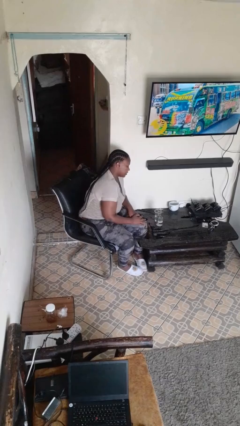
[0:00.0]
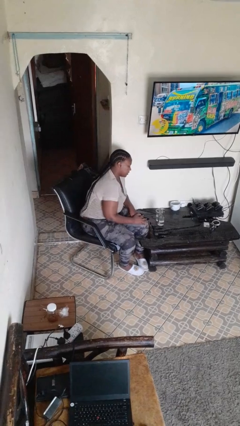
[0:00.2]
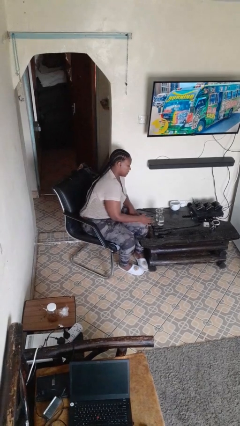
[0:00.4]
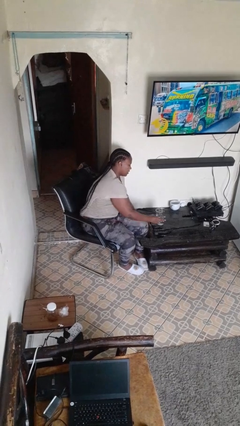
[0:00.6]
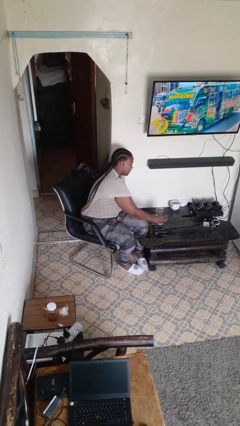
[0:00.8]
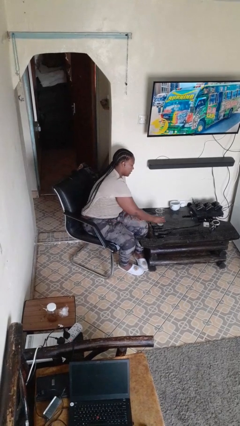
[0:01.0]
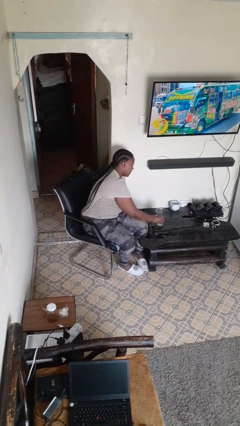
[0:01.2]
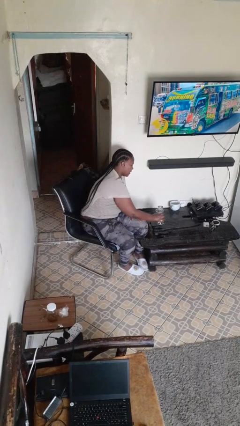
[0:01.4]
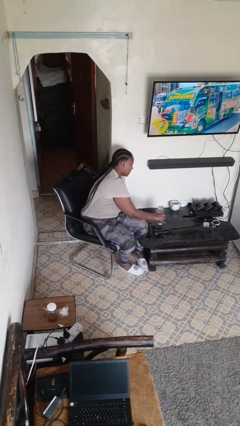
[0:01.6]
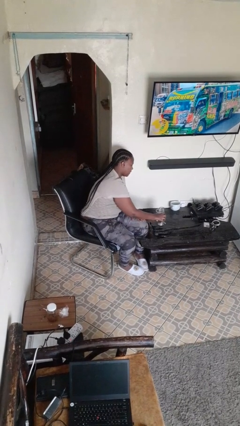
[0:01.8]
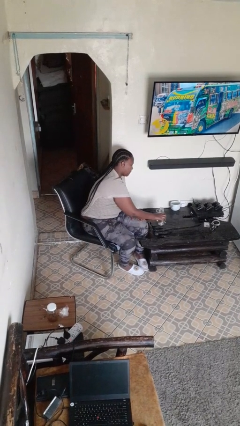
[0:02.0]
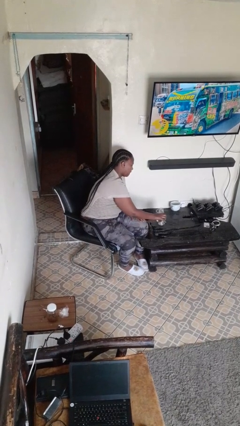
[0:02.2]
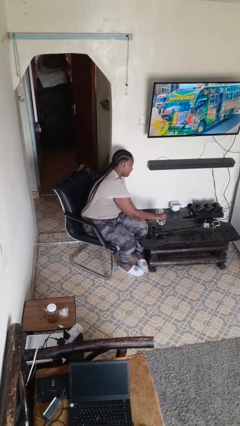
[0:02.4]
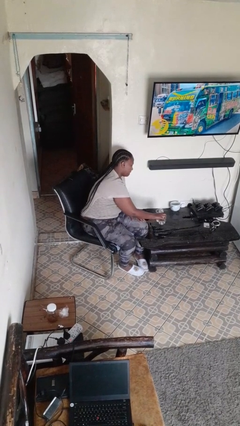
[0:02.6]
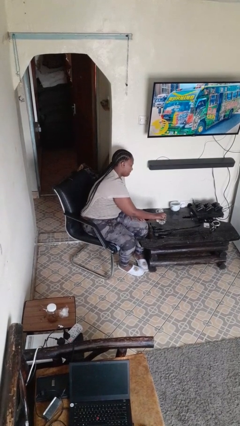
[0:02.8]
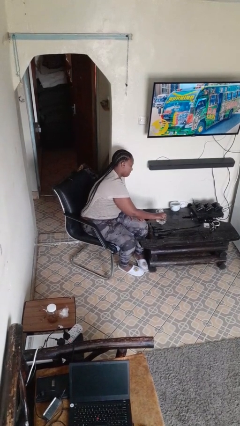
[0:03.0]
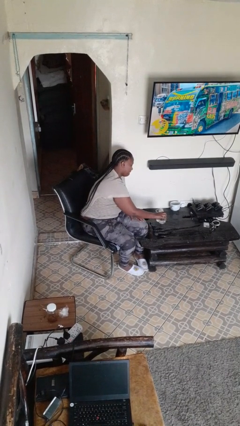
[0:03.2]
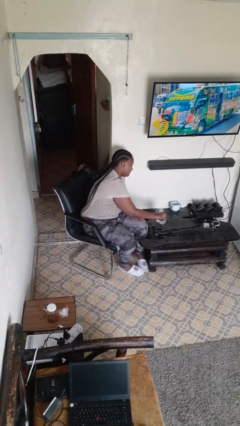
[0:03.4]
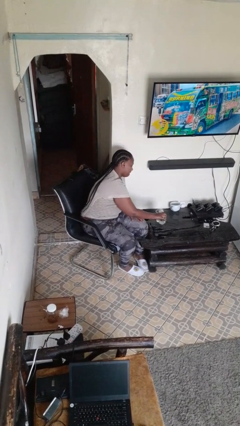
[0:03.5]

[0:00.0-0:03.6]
person pours liquid into cup

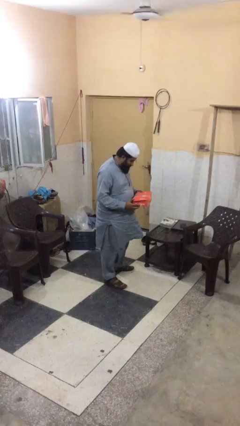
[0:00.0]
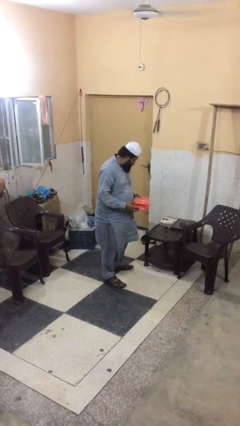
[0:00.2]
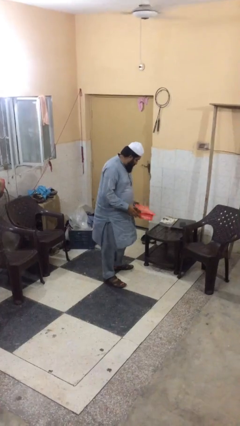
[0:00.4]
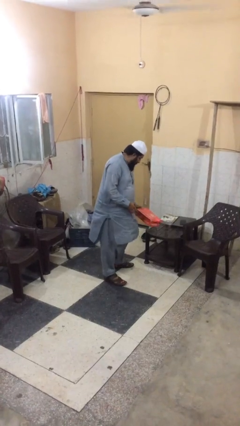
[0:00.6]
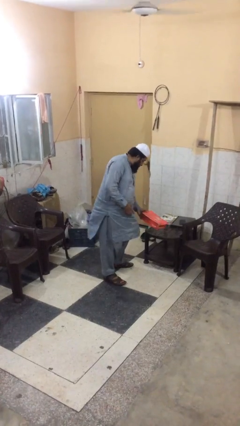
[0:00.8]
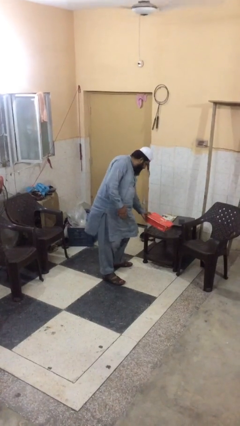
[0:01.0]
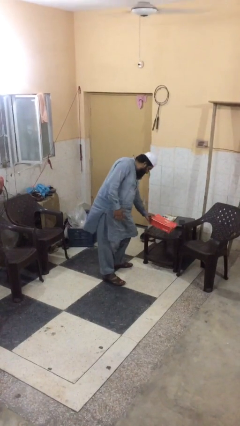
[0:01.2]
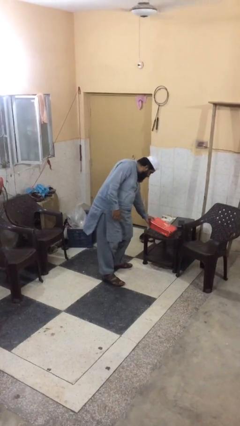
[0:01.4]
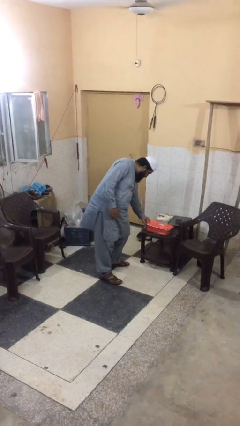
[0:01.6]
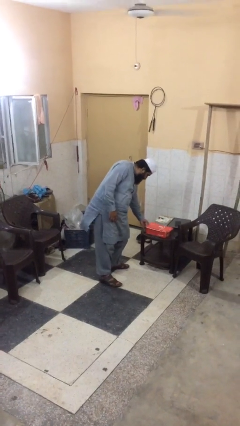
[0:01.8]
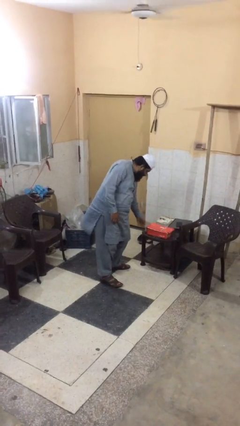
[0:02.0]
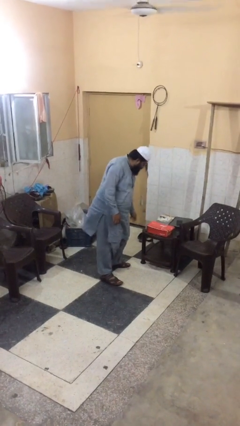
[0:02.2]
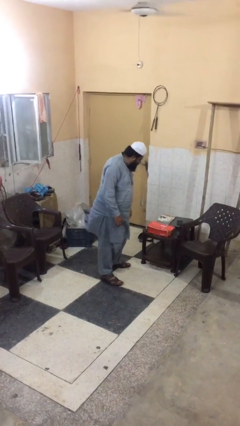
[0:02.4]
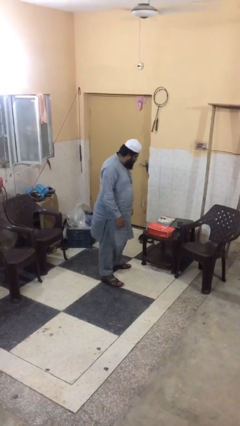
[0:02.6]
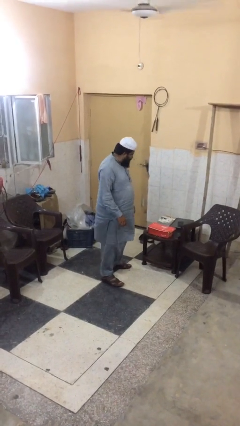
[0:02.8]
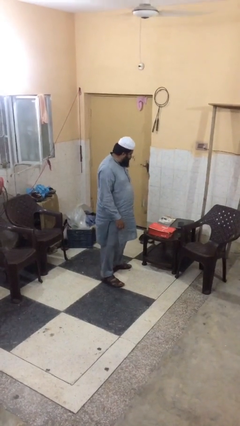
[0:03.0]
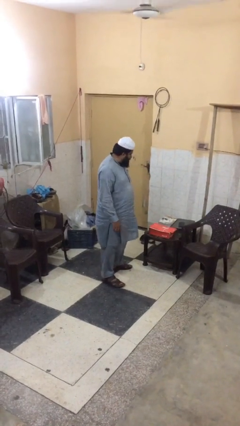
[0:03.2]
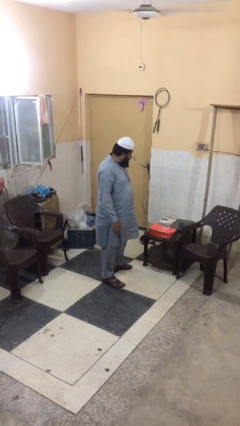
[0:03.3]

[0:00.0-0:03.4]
person puts down object on table

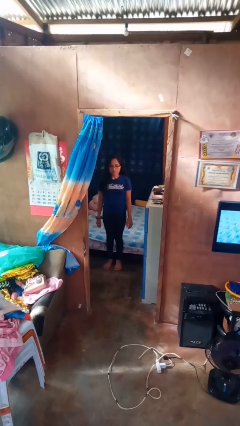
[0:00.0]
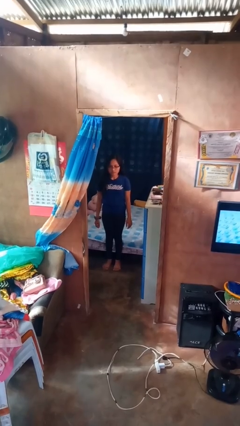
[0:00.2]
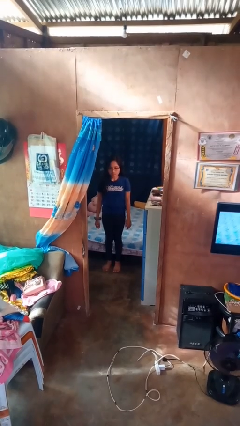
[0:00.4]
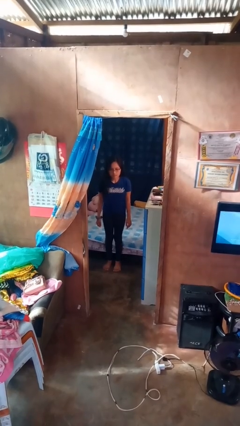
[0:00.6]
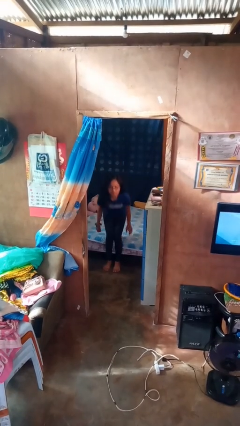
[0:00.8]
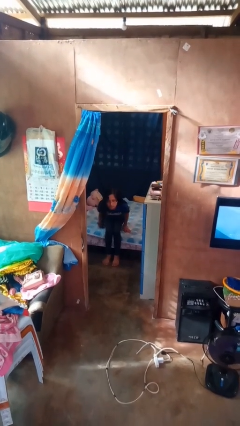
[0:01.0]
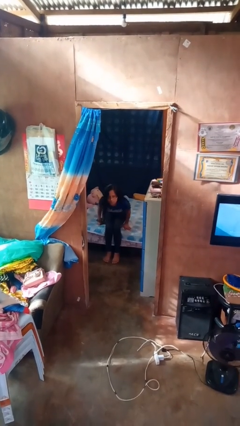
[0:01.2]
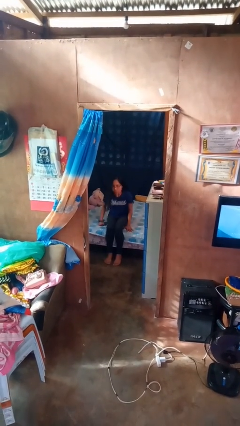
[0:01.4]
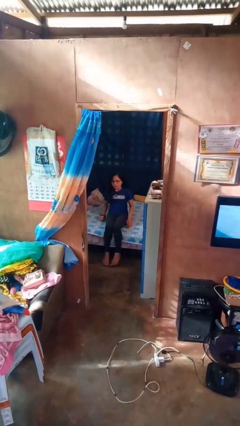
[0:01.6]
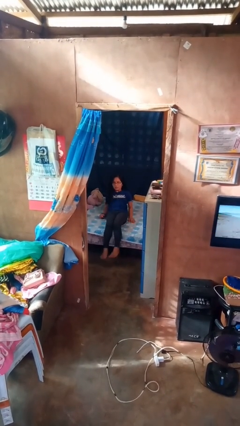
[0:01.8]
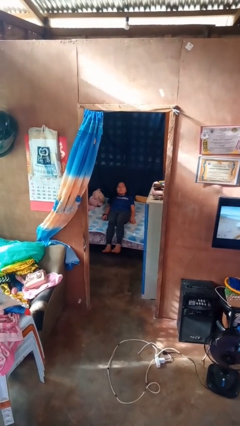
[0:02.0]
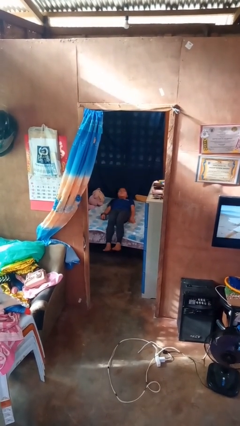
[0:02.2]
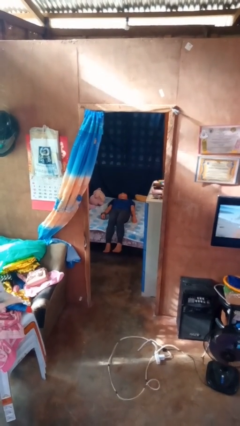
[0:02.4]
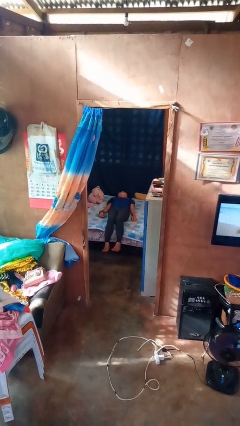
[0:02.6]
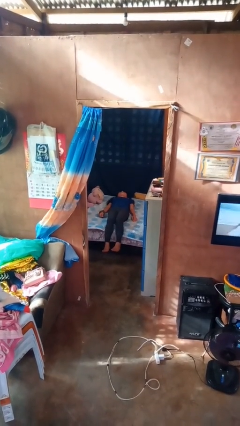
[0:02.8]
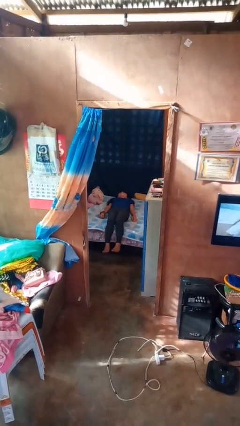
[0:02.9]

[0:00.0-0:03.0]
person lies down on bed

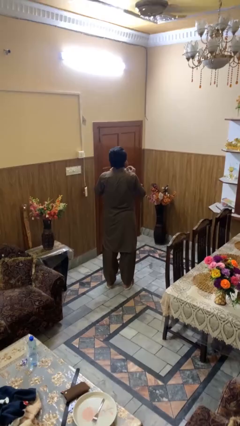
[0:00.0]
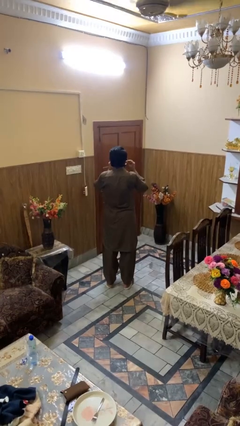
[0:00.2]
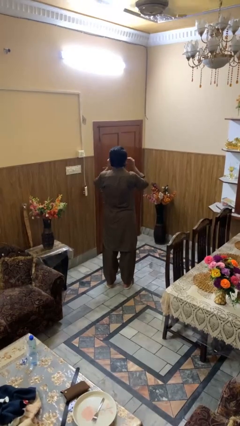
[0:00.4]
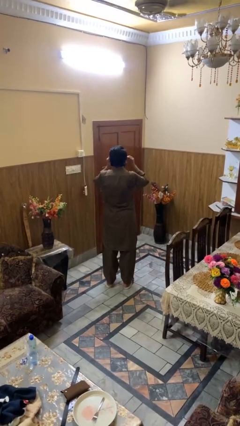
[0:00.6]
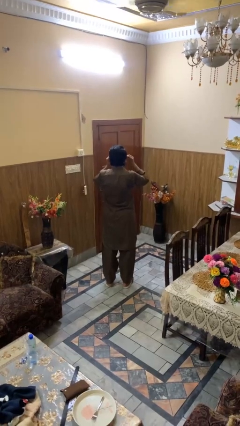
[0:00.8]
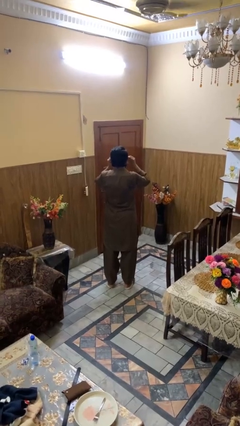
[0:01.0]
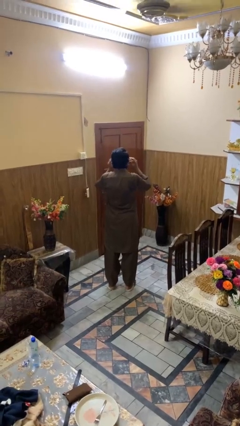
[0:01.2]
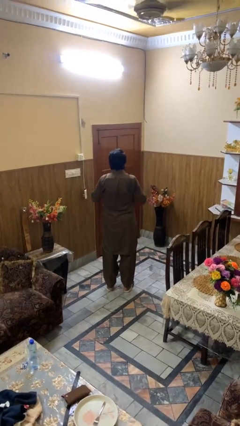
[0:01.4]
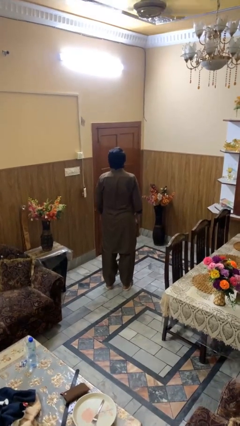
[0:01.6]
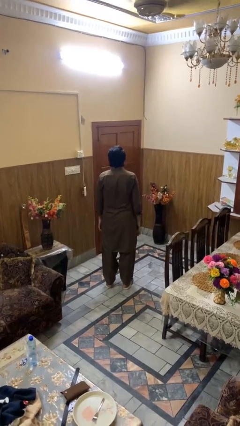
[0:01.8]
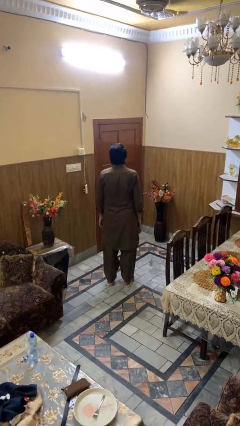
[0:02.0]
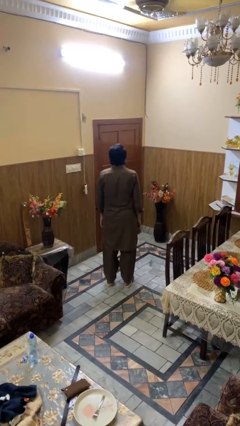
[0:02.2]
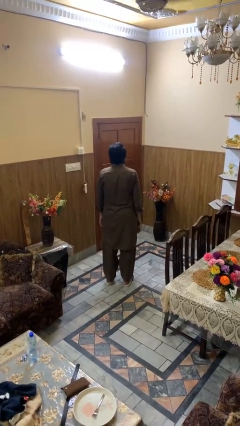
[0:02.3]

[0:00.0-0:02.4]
person puts on sunglasses

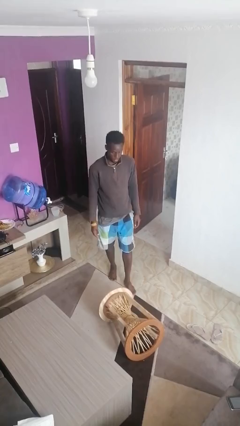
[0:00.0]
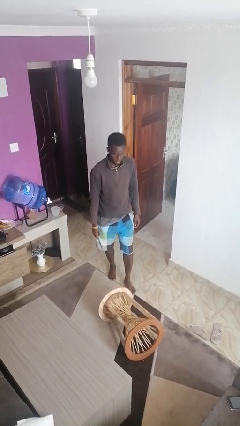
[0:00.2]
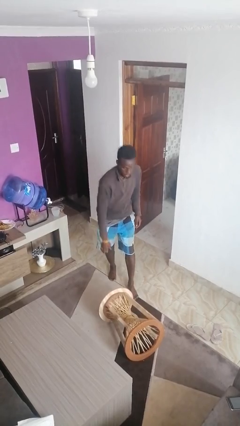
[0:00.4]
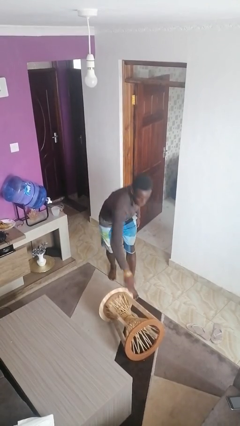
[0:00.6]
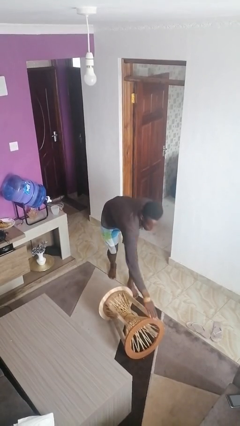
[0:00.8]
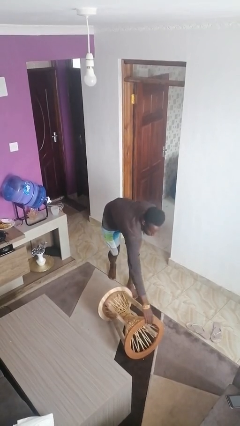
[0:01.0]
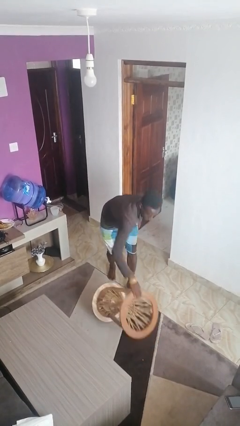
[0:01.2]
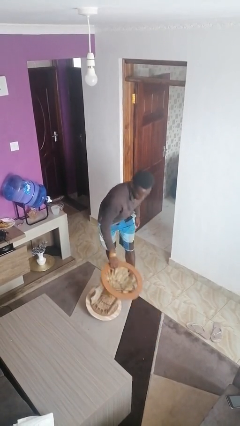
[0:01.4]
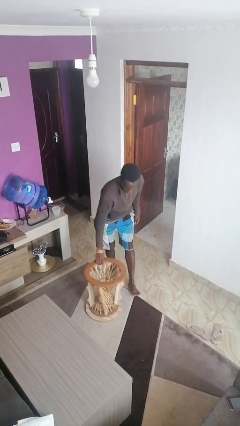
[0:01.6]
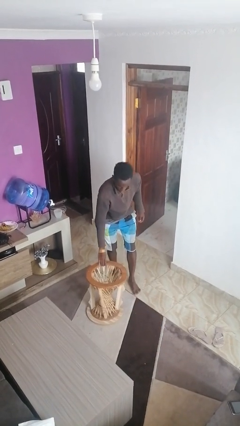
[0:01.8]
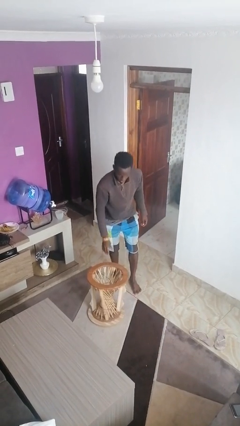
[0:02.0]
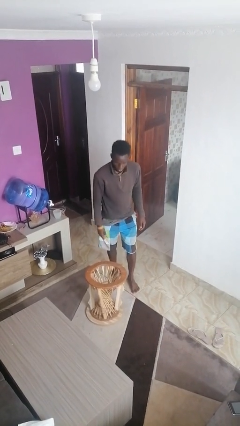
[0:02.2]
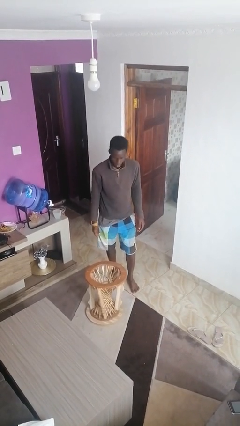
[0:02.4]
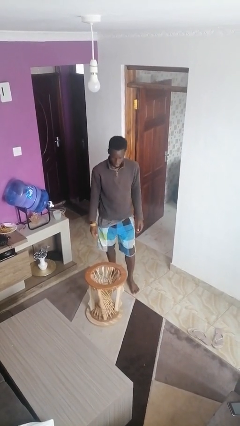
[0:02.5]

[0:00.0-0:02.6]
person sets upright furniture

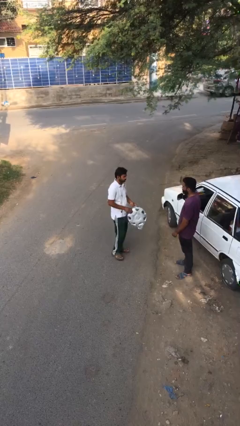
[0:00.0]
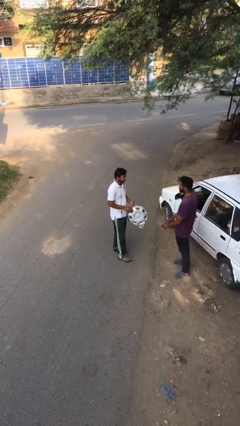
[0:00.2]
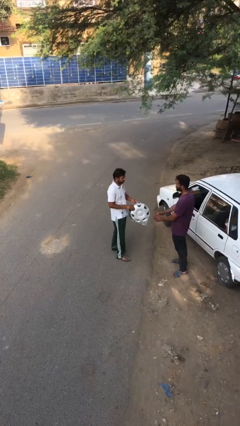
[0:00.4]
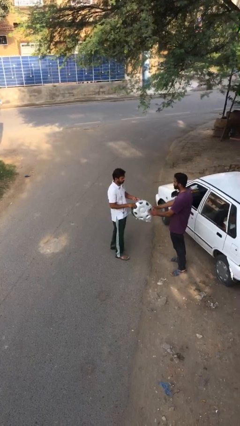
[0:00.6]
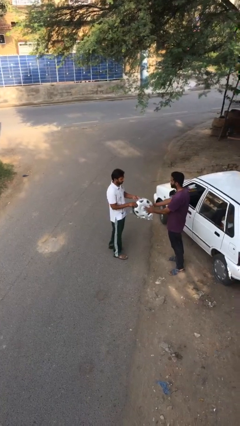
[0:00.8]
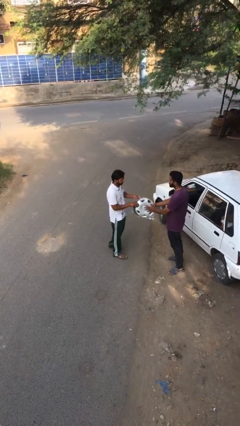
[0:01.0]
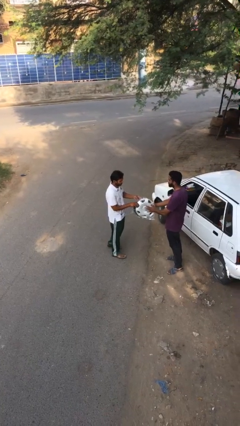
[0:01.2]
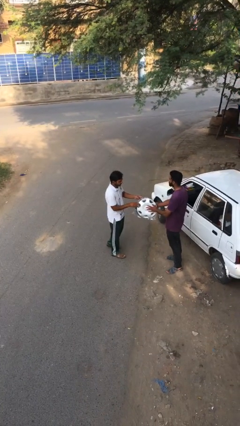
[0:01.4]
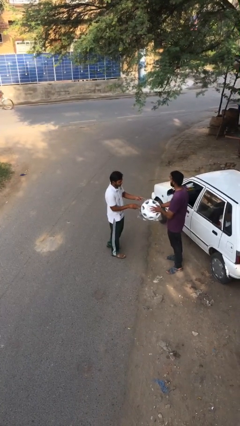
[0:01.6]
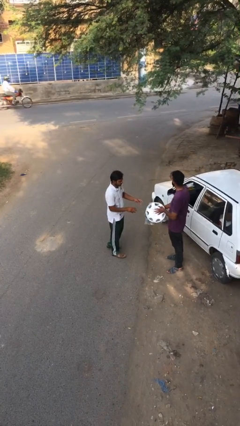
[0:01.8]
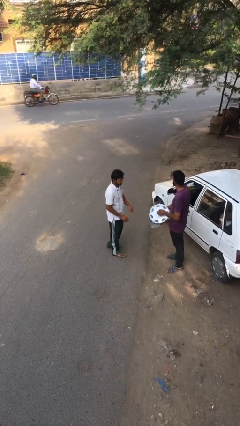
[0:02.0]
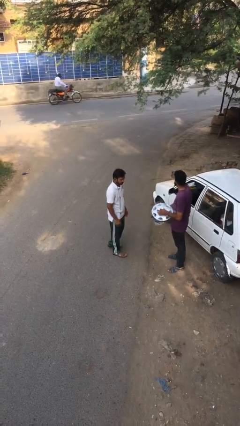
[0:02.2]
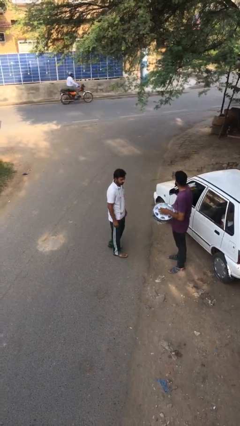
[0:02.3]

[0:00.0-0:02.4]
person transfers object to person
